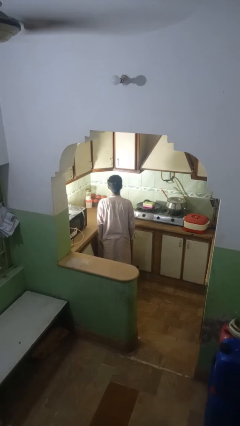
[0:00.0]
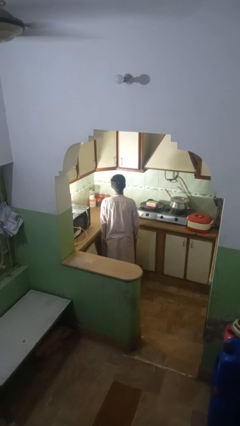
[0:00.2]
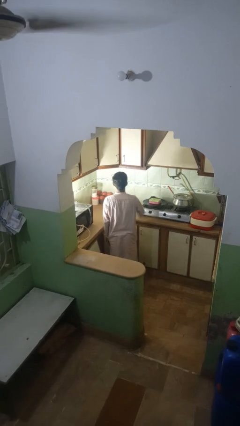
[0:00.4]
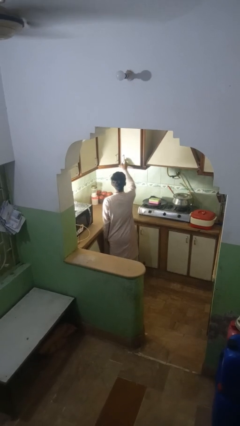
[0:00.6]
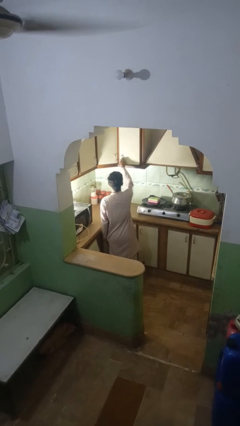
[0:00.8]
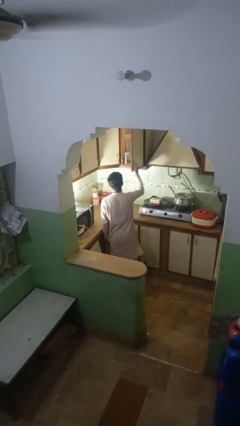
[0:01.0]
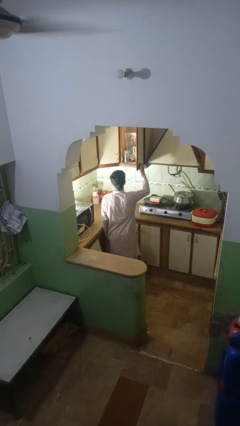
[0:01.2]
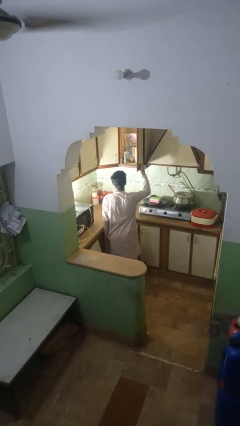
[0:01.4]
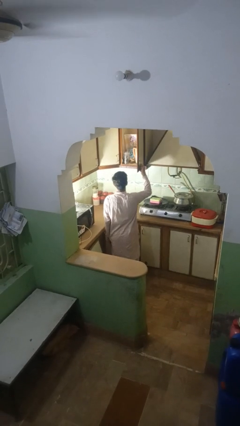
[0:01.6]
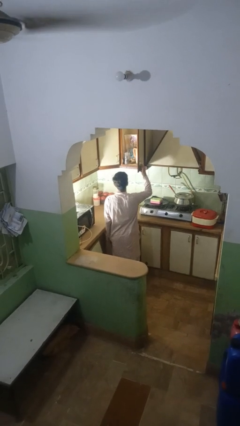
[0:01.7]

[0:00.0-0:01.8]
person opens kitchen drawer

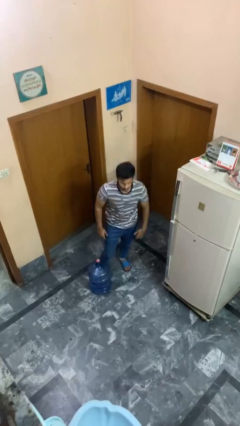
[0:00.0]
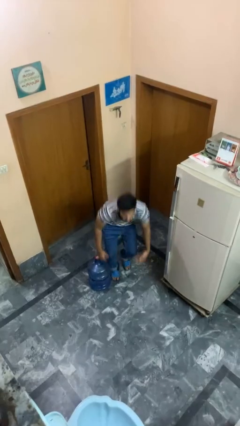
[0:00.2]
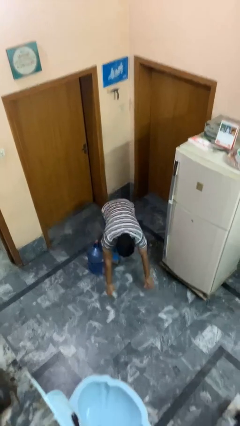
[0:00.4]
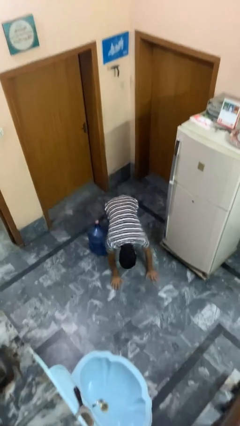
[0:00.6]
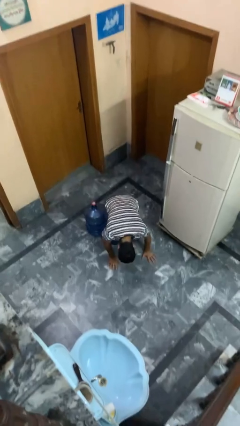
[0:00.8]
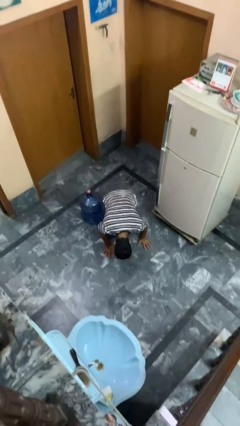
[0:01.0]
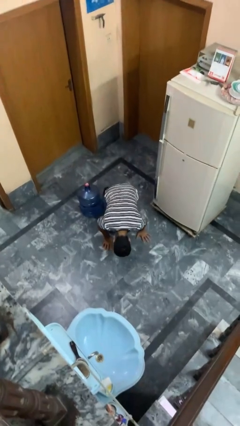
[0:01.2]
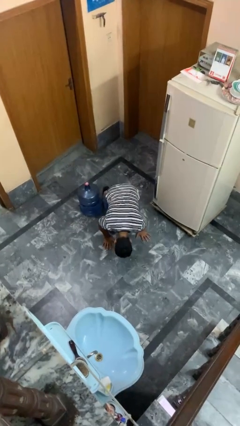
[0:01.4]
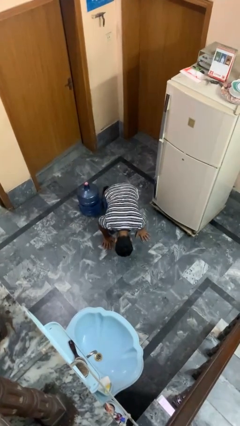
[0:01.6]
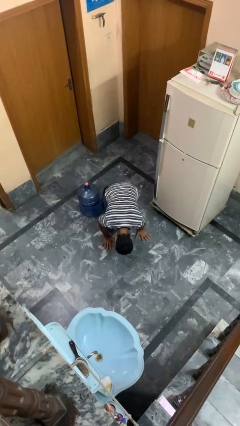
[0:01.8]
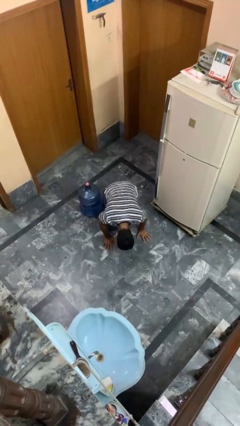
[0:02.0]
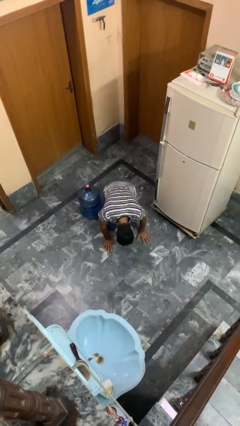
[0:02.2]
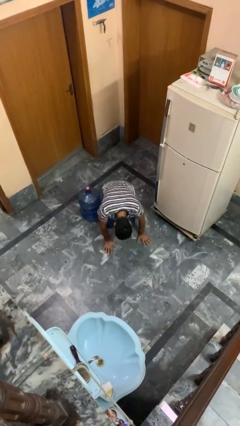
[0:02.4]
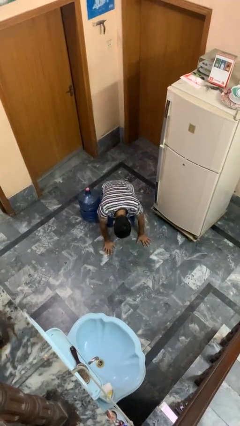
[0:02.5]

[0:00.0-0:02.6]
person trips on object on floor

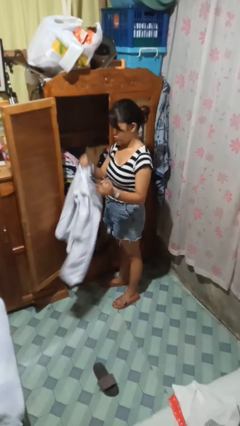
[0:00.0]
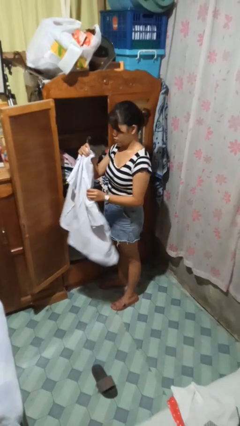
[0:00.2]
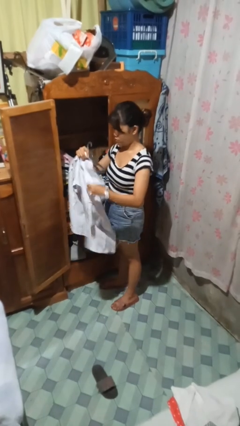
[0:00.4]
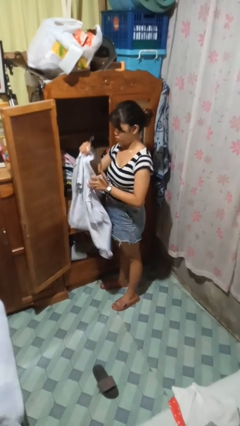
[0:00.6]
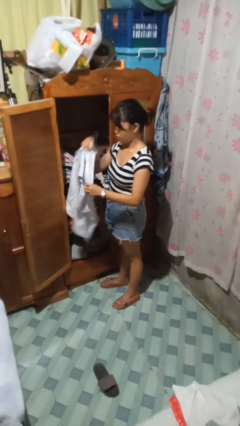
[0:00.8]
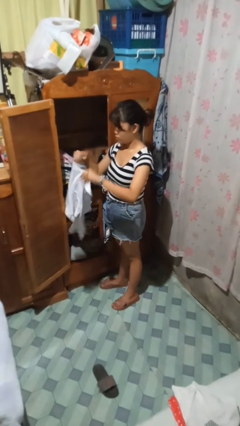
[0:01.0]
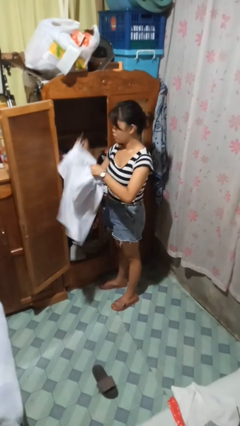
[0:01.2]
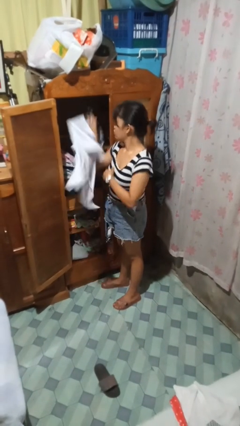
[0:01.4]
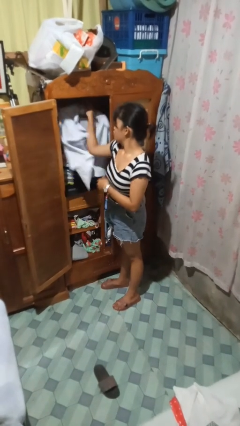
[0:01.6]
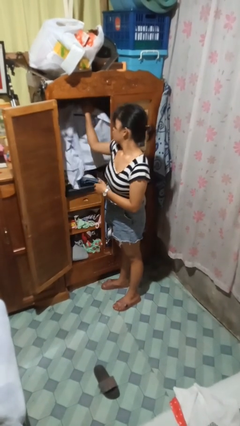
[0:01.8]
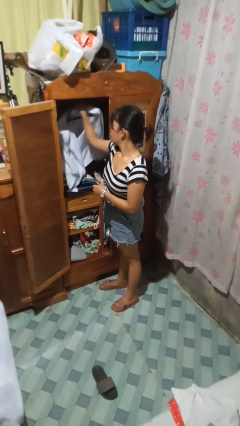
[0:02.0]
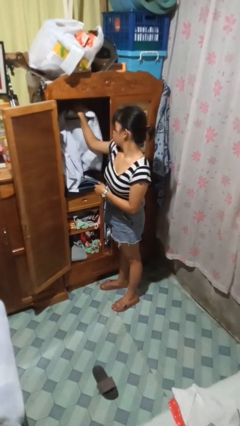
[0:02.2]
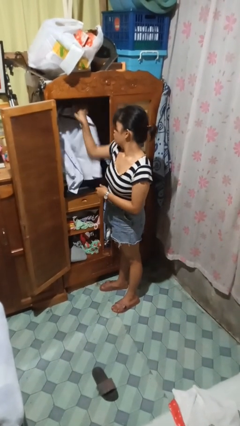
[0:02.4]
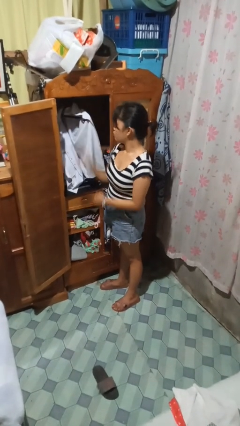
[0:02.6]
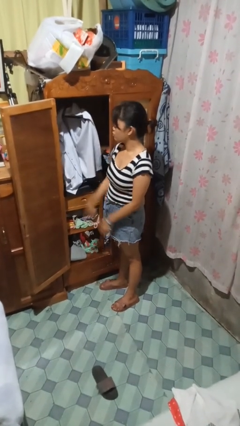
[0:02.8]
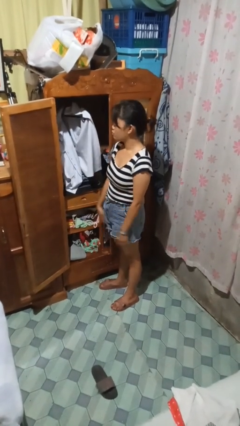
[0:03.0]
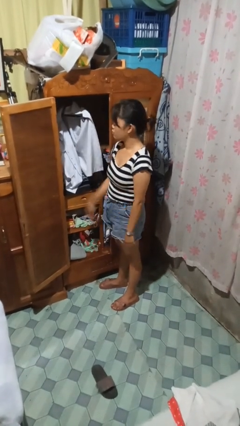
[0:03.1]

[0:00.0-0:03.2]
person puts clothes into closet

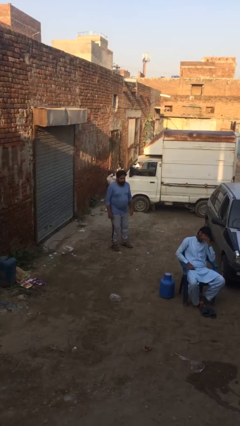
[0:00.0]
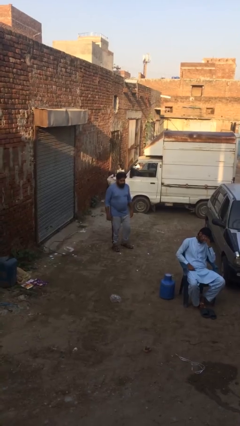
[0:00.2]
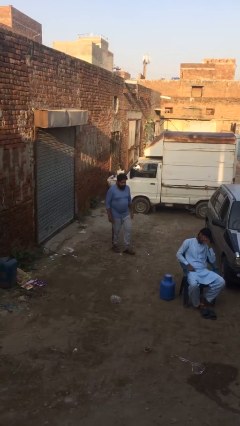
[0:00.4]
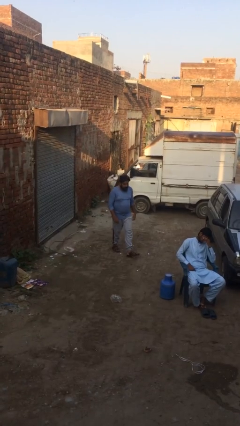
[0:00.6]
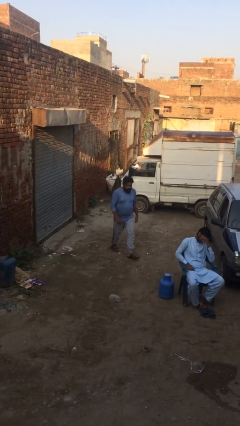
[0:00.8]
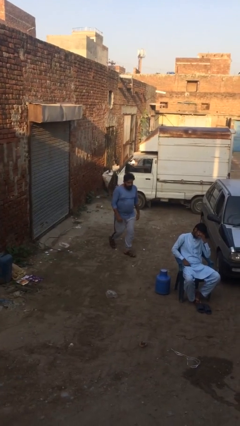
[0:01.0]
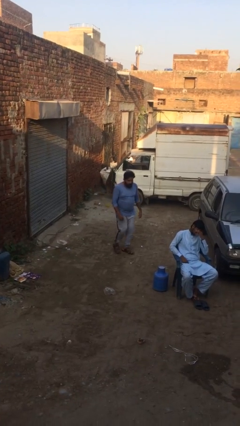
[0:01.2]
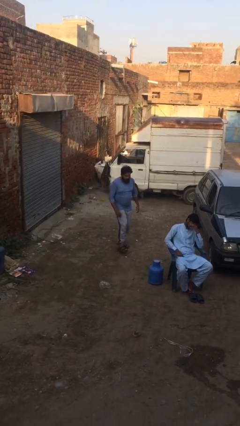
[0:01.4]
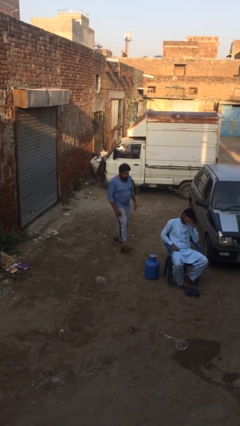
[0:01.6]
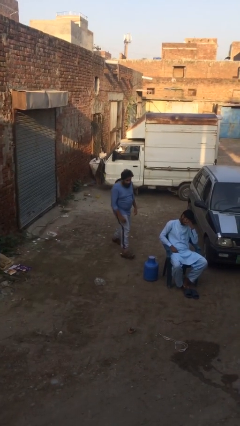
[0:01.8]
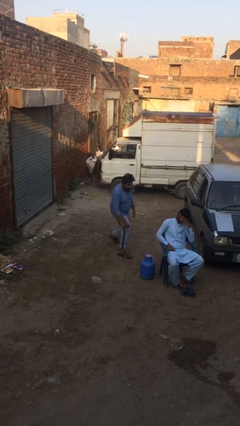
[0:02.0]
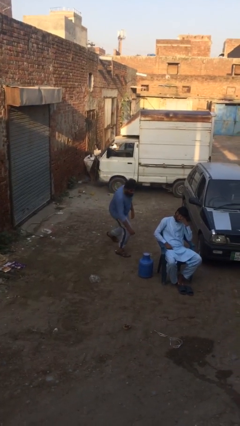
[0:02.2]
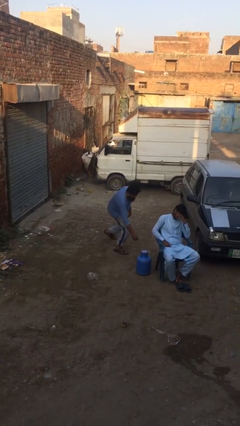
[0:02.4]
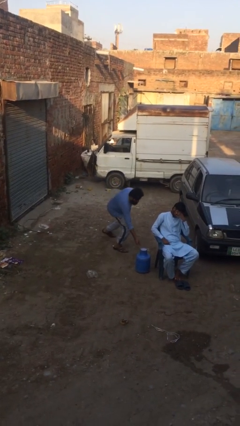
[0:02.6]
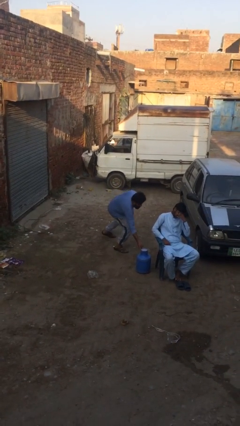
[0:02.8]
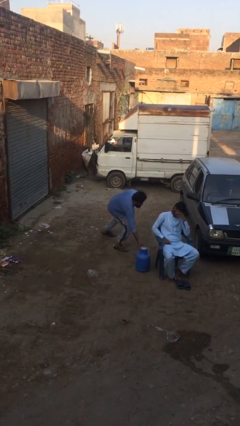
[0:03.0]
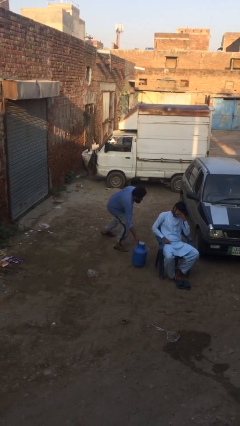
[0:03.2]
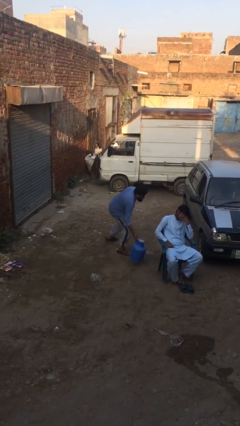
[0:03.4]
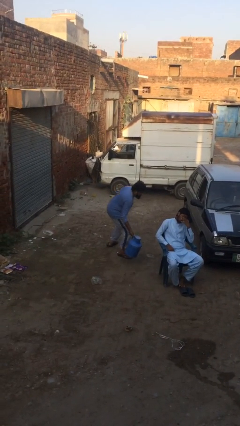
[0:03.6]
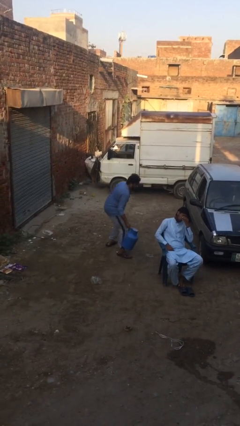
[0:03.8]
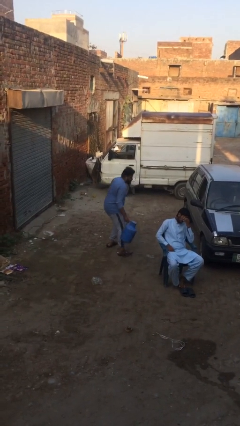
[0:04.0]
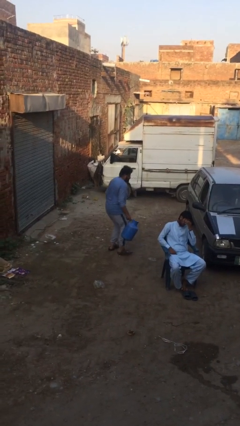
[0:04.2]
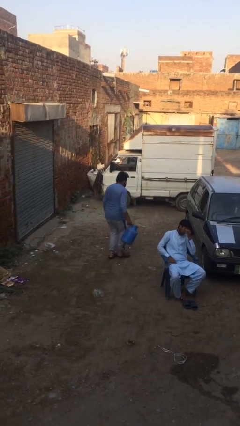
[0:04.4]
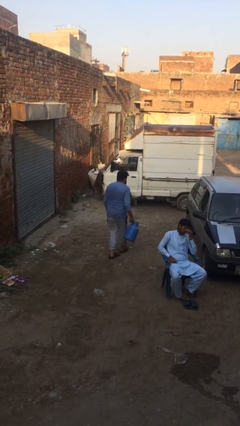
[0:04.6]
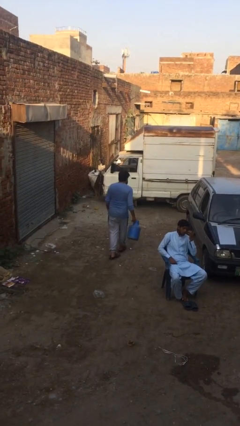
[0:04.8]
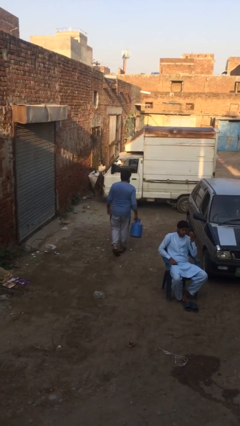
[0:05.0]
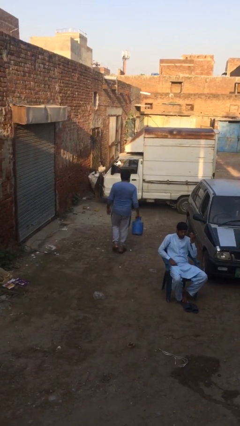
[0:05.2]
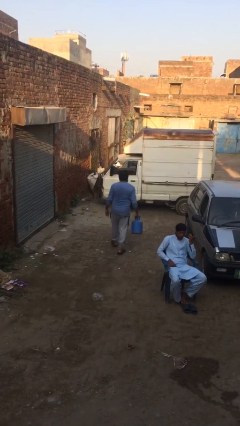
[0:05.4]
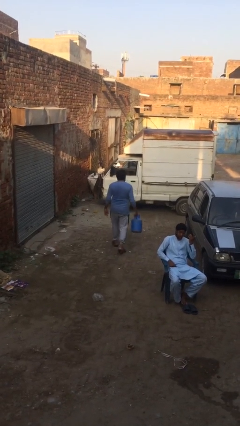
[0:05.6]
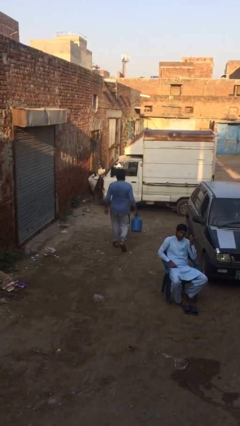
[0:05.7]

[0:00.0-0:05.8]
person steals object from person

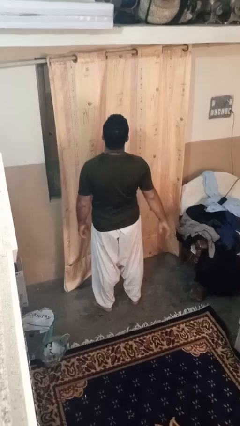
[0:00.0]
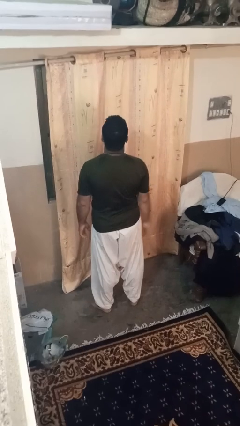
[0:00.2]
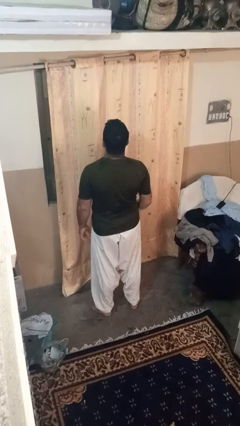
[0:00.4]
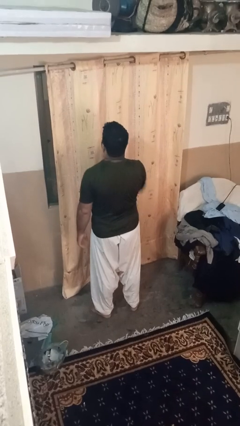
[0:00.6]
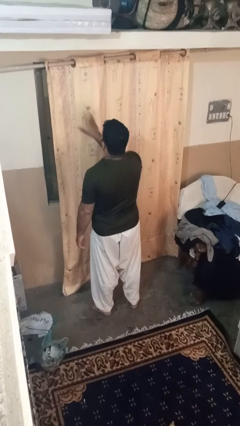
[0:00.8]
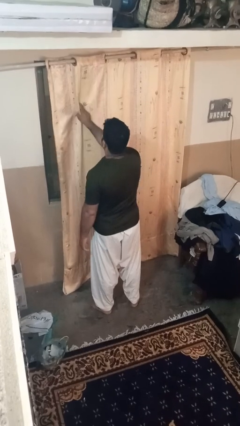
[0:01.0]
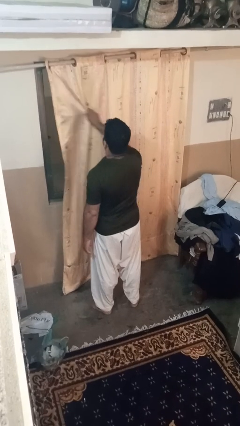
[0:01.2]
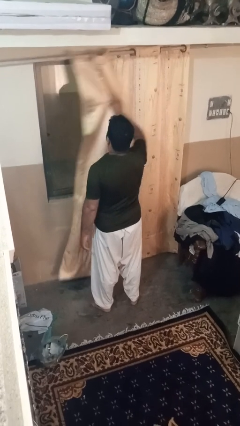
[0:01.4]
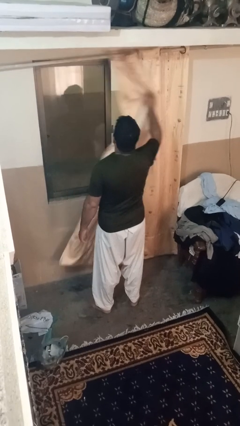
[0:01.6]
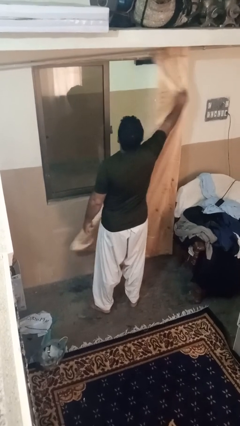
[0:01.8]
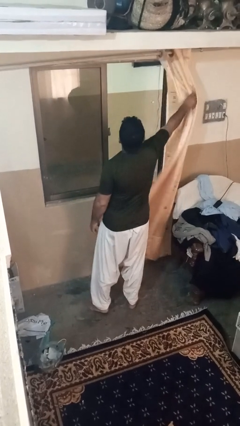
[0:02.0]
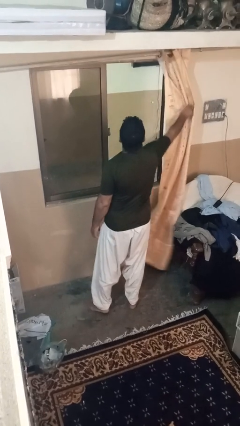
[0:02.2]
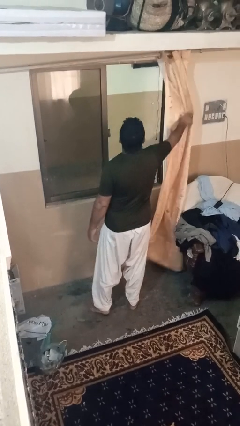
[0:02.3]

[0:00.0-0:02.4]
person opens curtains

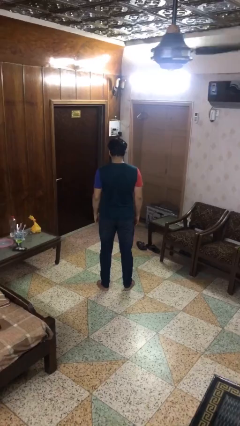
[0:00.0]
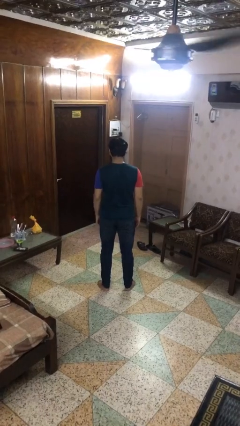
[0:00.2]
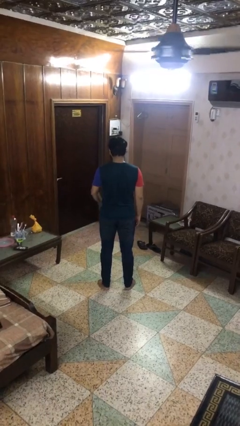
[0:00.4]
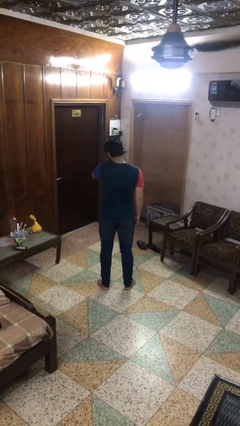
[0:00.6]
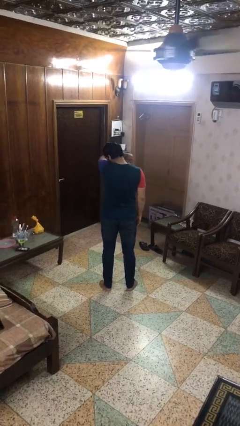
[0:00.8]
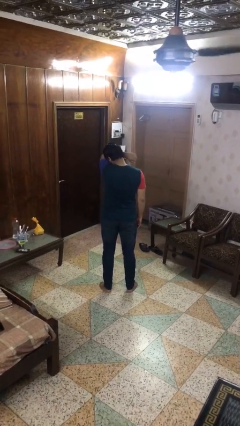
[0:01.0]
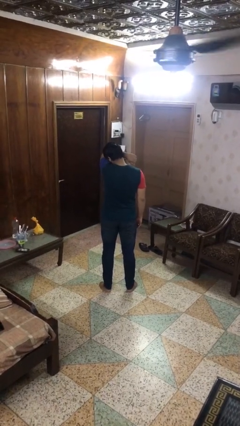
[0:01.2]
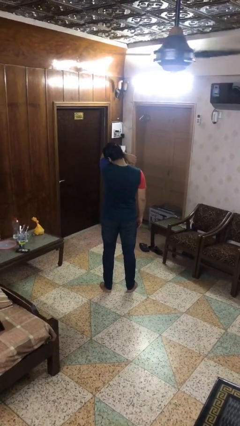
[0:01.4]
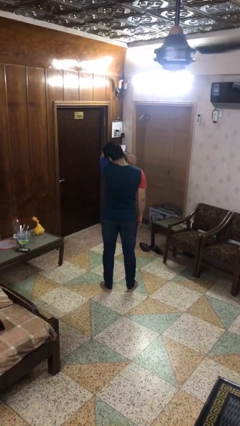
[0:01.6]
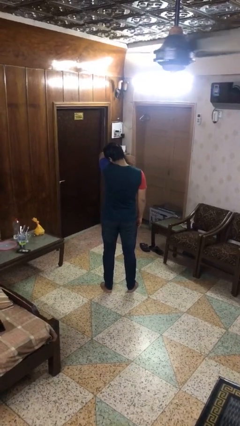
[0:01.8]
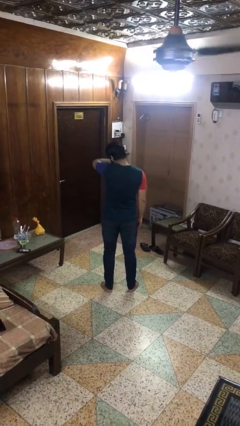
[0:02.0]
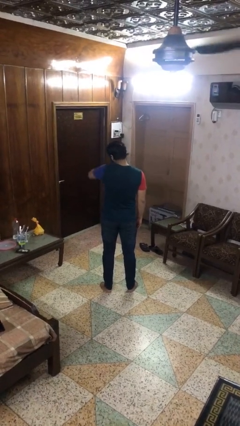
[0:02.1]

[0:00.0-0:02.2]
person sneezes into arm
